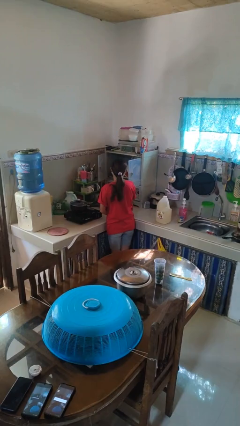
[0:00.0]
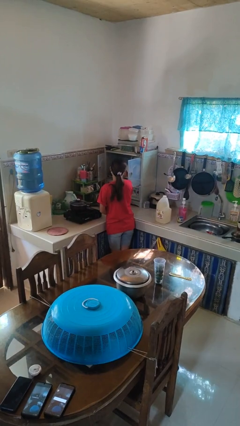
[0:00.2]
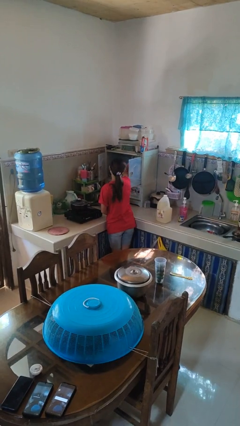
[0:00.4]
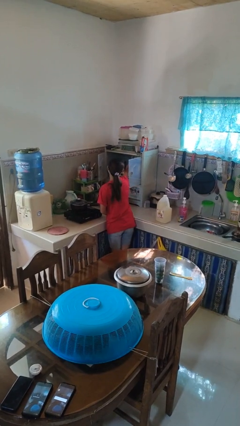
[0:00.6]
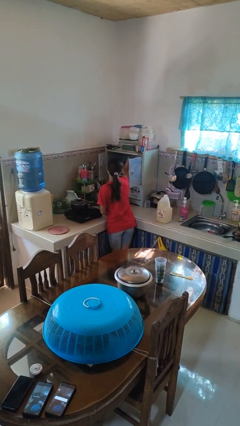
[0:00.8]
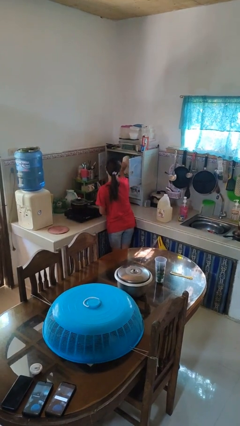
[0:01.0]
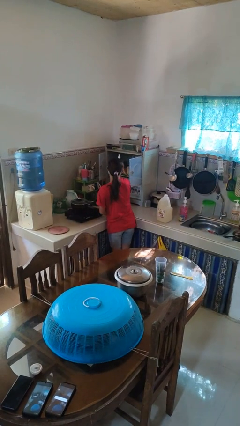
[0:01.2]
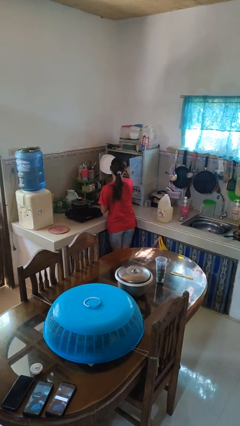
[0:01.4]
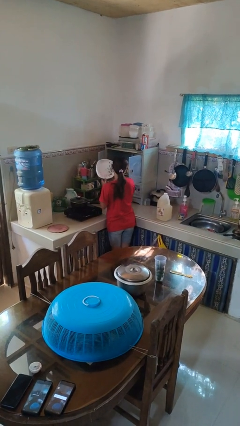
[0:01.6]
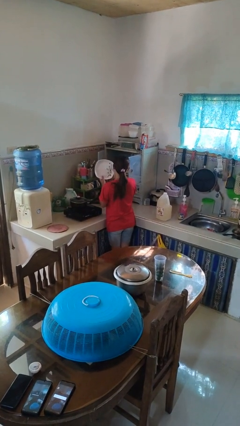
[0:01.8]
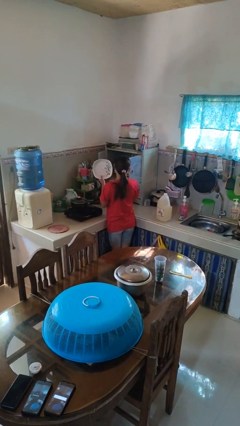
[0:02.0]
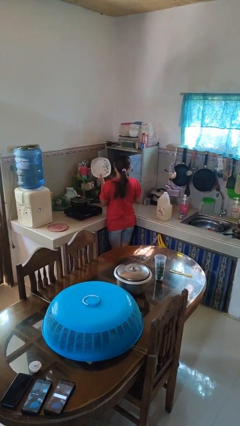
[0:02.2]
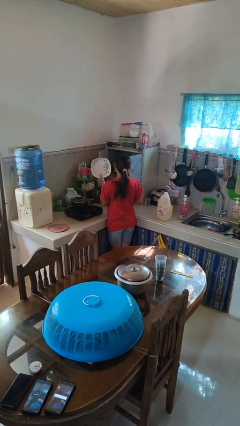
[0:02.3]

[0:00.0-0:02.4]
person takes object from cabinet

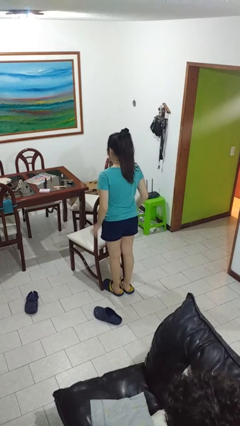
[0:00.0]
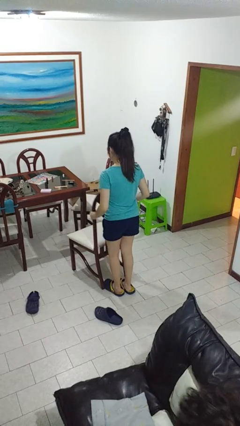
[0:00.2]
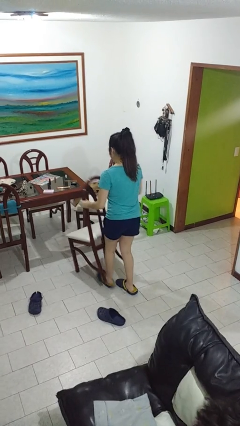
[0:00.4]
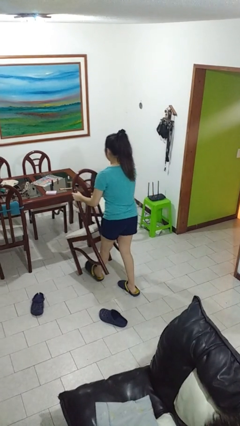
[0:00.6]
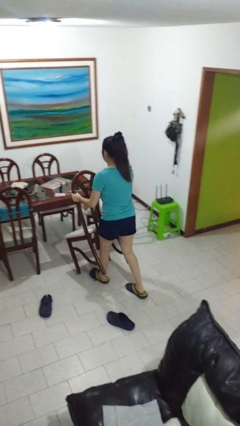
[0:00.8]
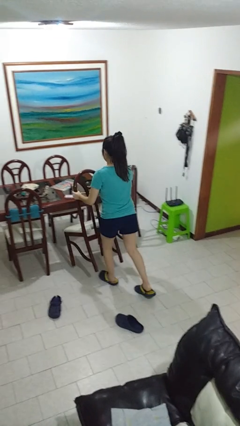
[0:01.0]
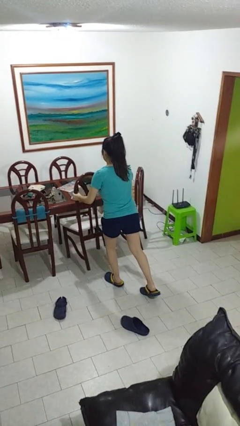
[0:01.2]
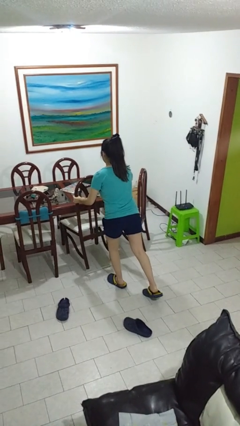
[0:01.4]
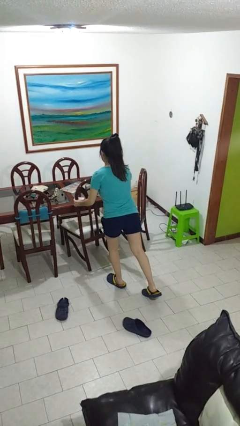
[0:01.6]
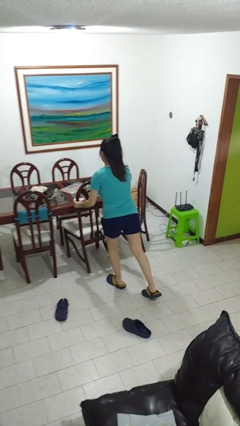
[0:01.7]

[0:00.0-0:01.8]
person pushes in chair

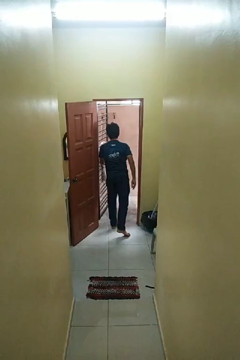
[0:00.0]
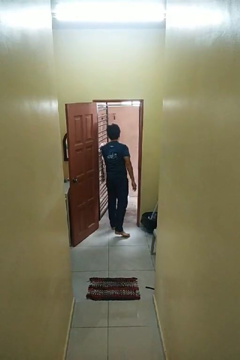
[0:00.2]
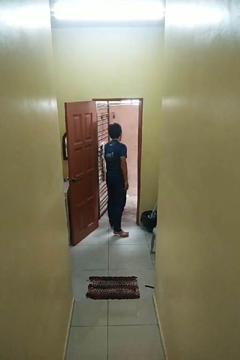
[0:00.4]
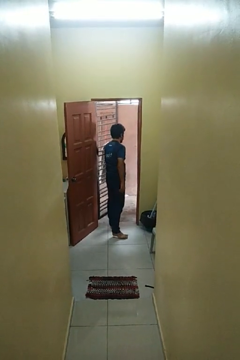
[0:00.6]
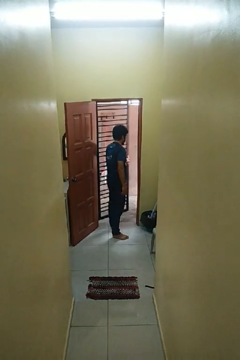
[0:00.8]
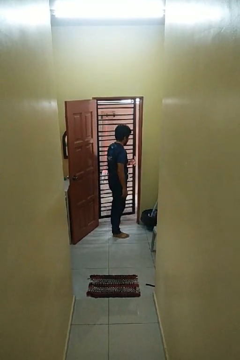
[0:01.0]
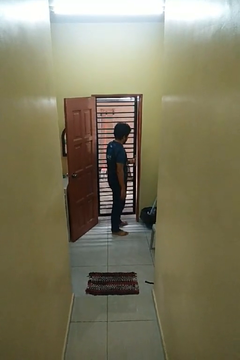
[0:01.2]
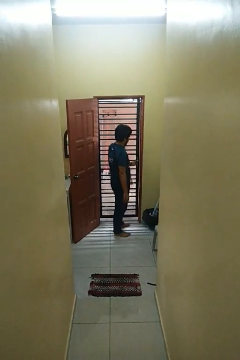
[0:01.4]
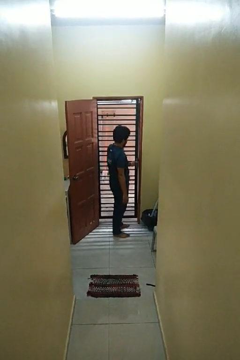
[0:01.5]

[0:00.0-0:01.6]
person closes gate

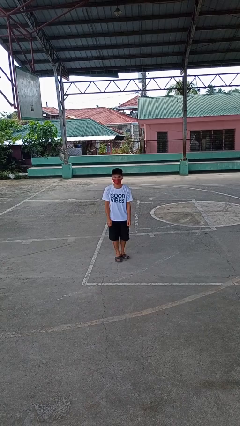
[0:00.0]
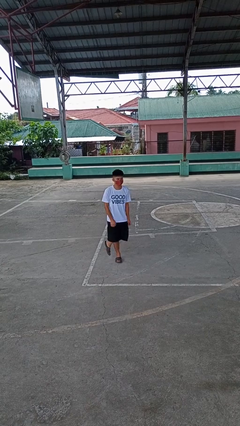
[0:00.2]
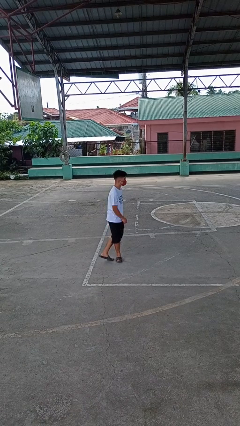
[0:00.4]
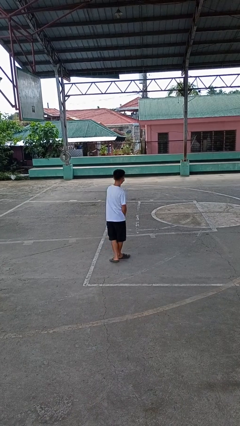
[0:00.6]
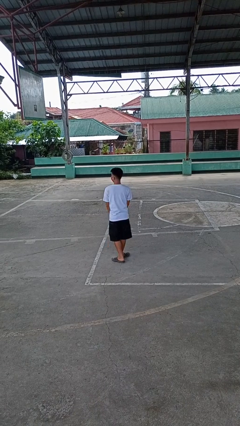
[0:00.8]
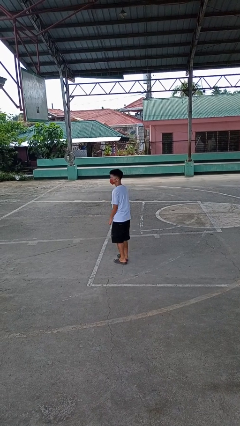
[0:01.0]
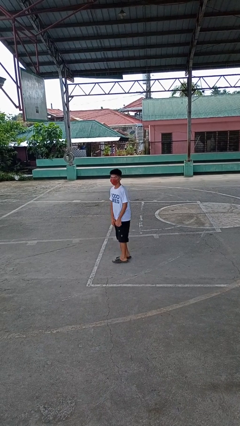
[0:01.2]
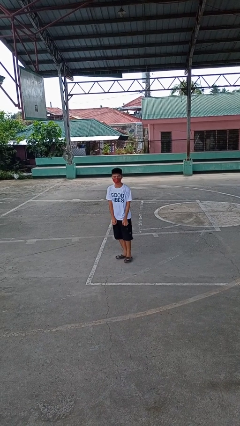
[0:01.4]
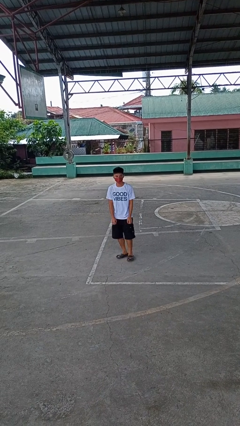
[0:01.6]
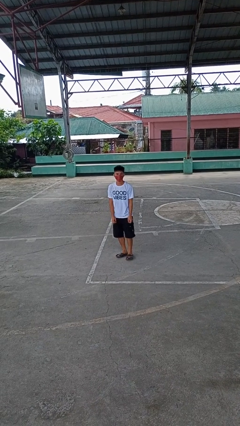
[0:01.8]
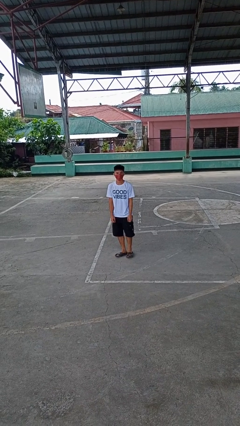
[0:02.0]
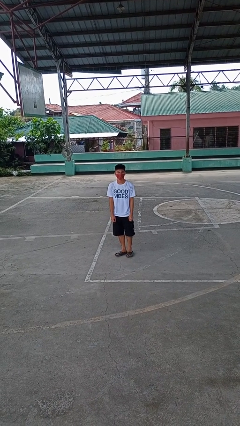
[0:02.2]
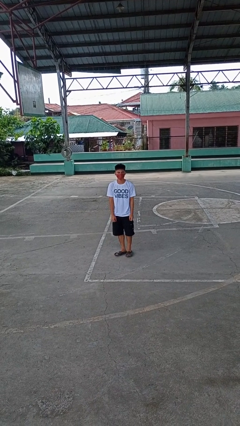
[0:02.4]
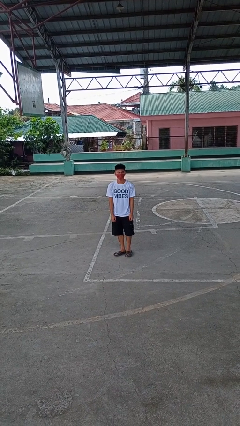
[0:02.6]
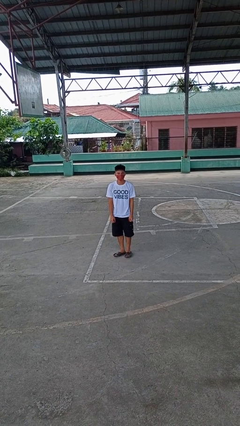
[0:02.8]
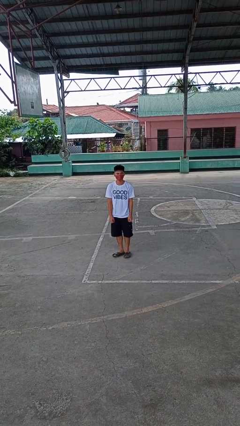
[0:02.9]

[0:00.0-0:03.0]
person twirls

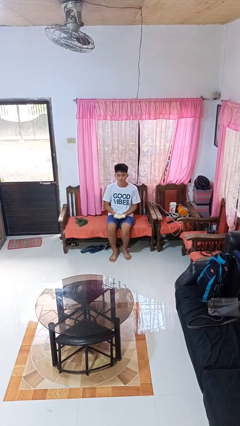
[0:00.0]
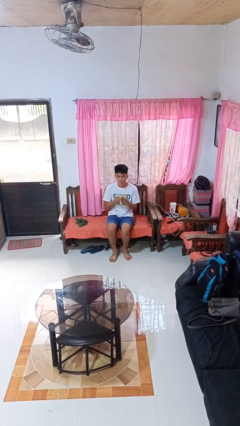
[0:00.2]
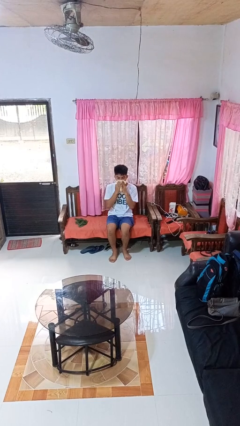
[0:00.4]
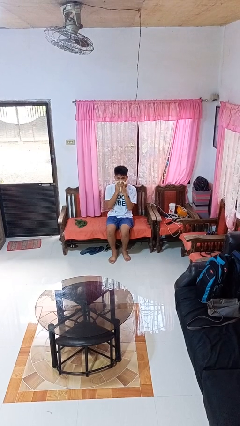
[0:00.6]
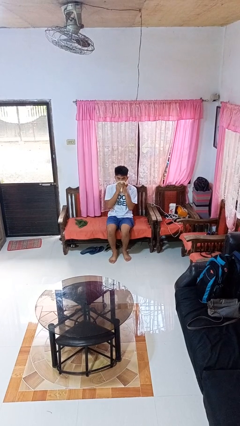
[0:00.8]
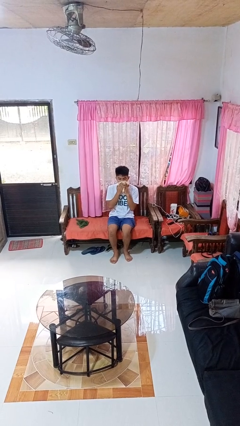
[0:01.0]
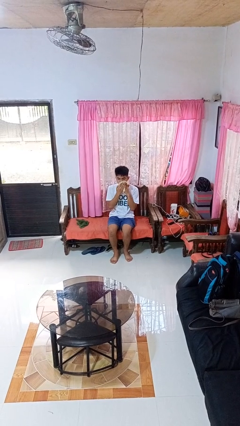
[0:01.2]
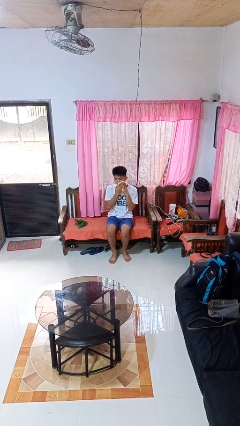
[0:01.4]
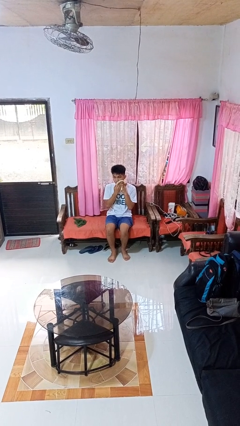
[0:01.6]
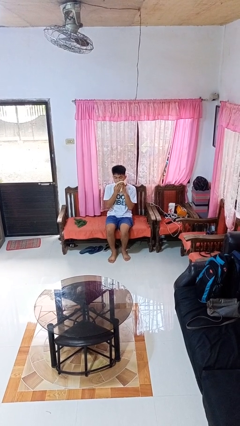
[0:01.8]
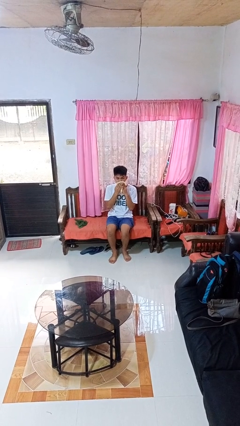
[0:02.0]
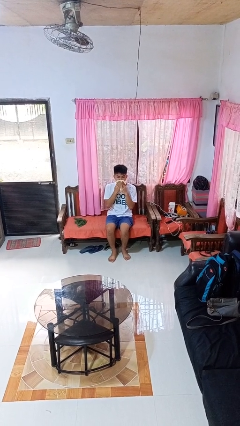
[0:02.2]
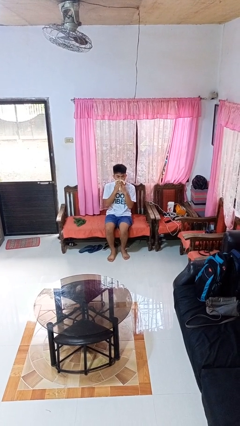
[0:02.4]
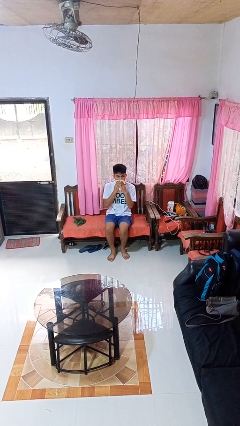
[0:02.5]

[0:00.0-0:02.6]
person wipes mouth with napkin

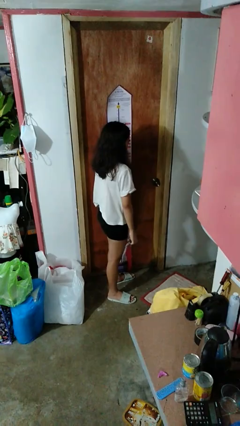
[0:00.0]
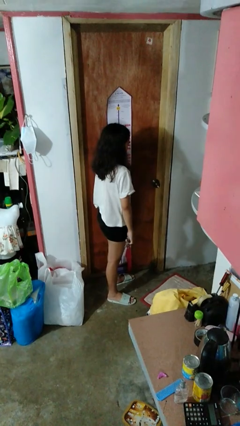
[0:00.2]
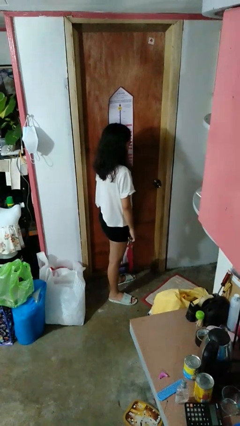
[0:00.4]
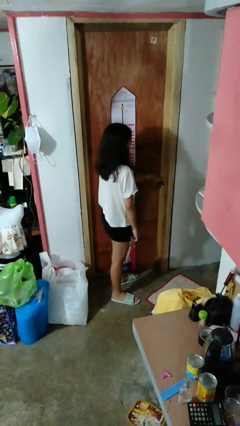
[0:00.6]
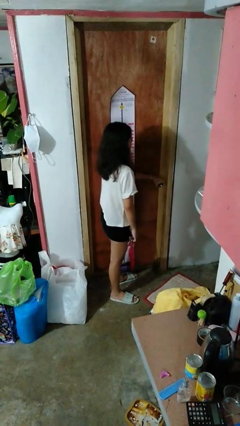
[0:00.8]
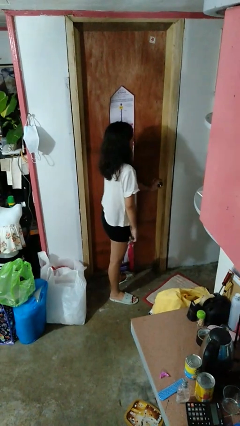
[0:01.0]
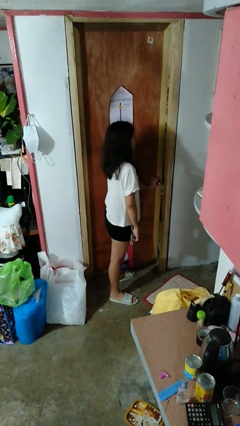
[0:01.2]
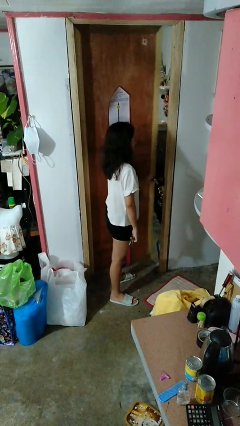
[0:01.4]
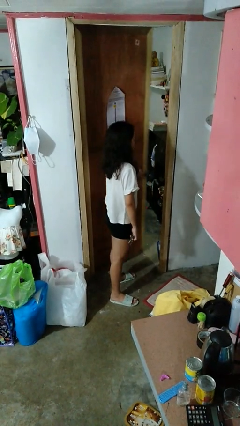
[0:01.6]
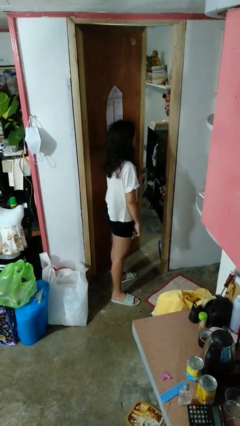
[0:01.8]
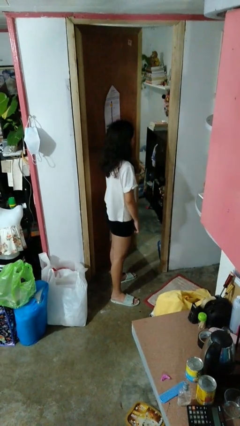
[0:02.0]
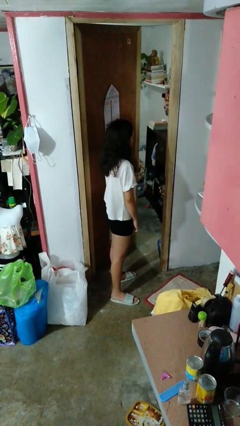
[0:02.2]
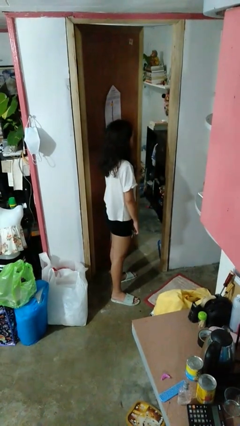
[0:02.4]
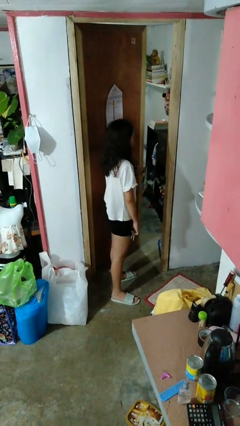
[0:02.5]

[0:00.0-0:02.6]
person opens facility door

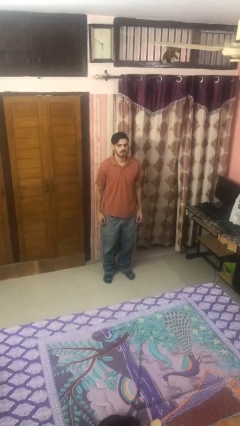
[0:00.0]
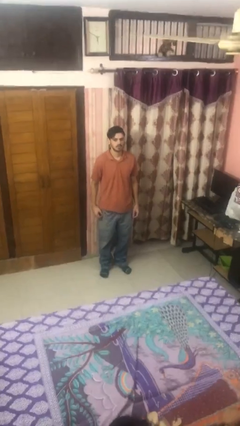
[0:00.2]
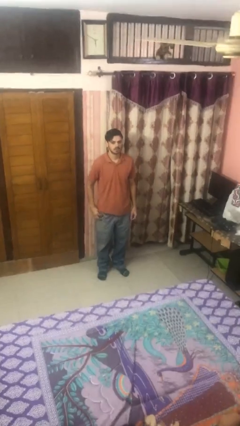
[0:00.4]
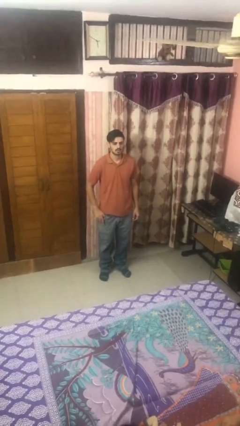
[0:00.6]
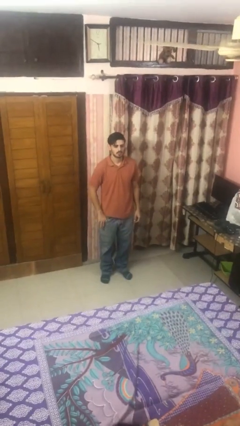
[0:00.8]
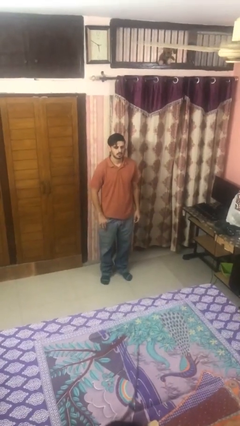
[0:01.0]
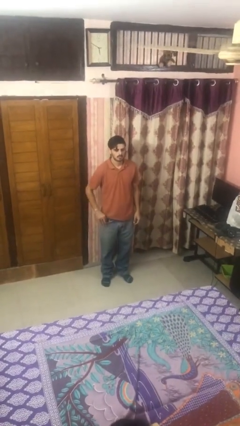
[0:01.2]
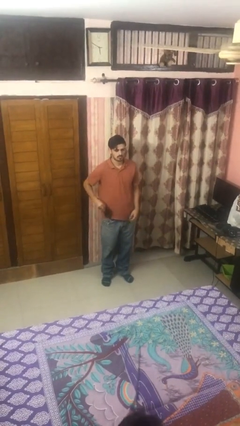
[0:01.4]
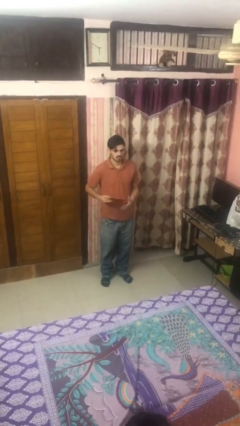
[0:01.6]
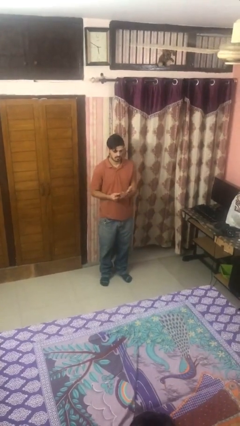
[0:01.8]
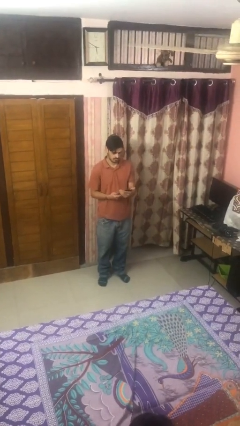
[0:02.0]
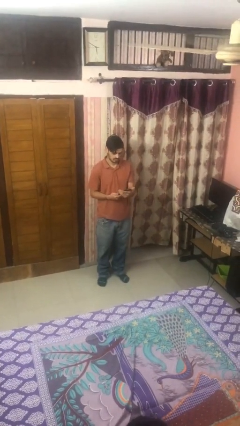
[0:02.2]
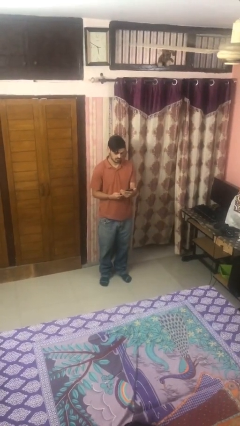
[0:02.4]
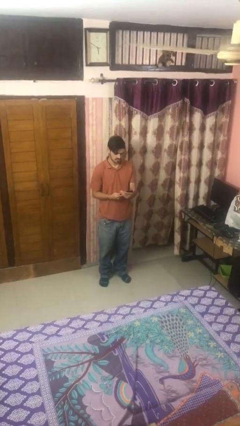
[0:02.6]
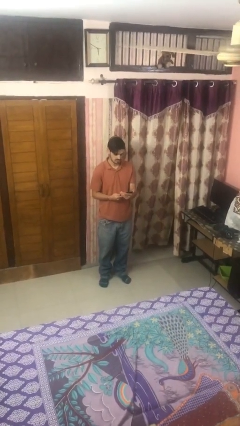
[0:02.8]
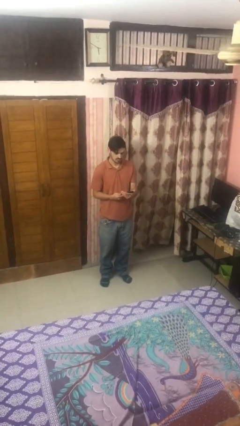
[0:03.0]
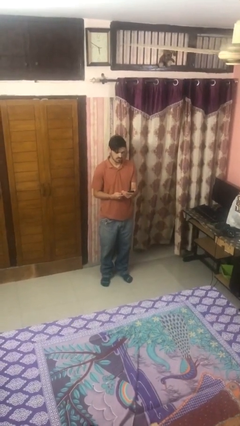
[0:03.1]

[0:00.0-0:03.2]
person takes phone from pocket

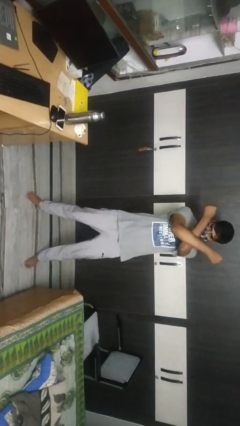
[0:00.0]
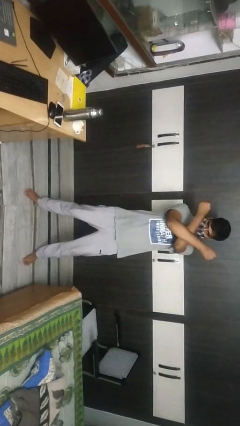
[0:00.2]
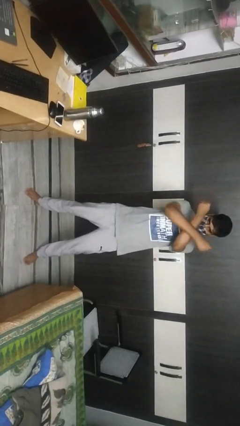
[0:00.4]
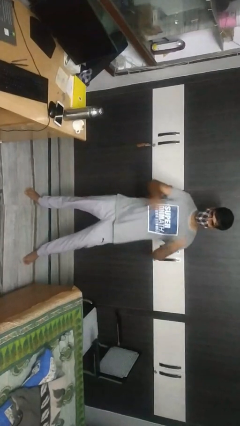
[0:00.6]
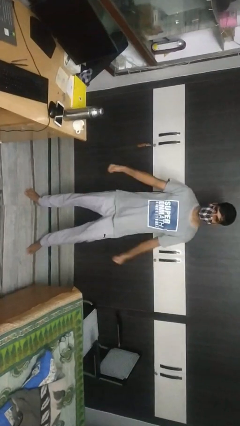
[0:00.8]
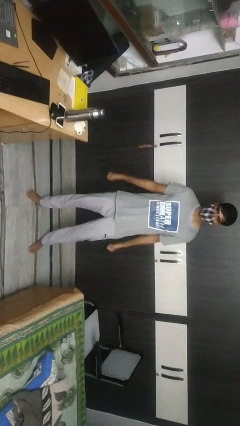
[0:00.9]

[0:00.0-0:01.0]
person gestures arms x
